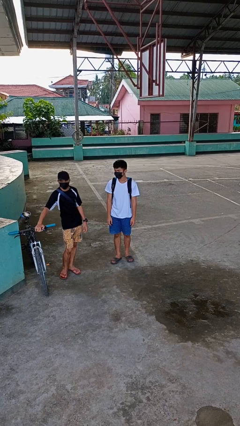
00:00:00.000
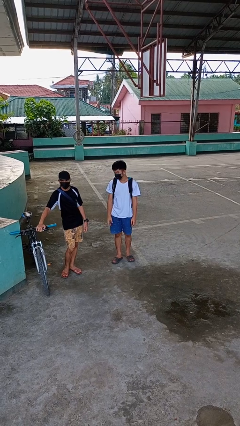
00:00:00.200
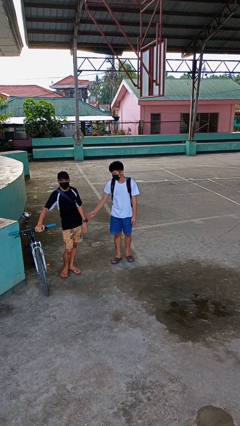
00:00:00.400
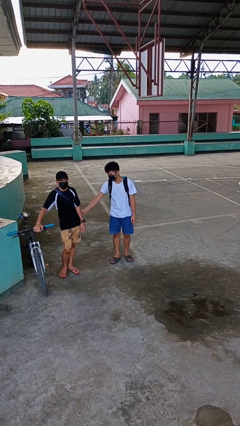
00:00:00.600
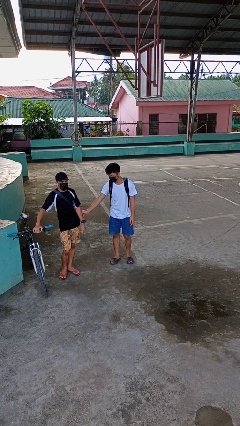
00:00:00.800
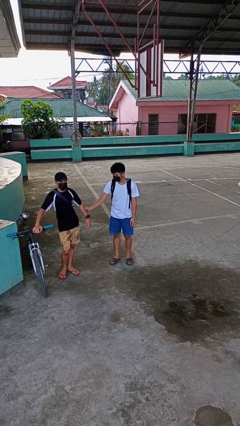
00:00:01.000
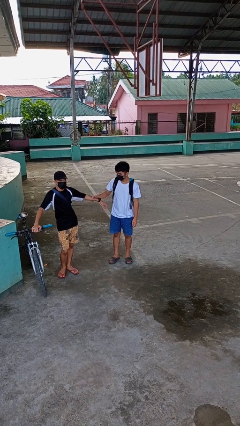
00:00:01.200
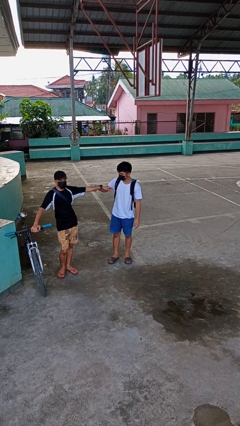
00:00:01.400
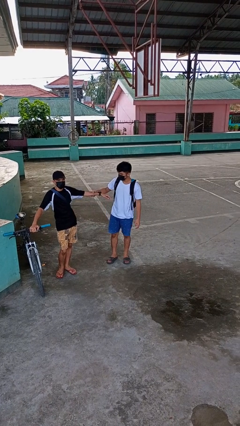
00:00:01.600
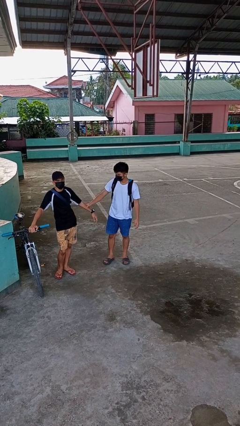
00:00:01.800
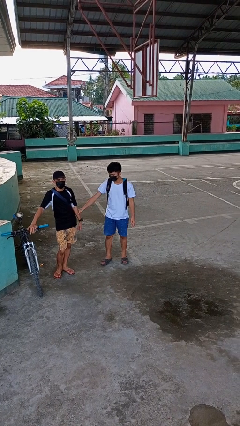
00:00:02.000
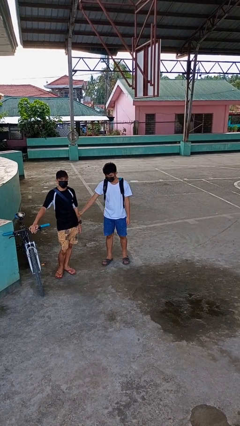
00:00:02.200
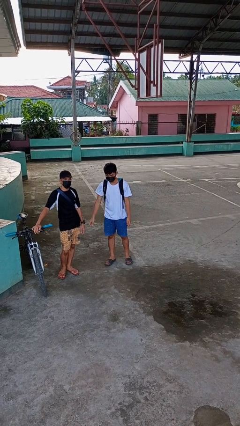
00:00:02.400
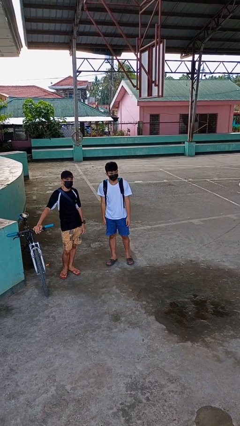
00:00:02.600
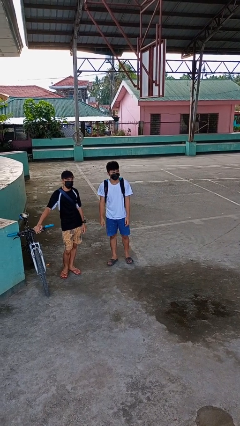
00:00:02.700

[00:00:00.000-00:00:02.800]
person grabs person by forearm

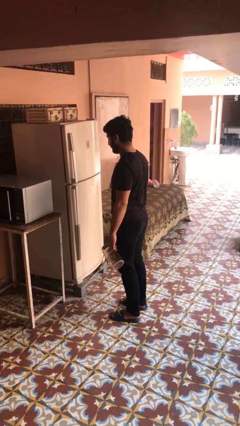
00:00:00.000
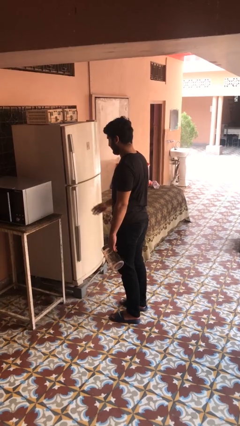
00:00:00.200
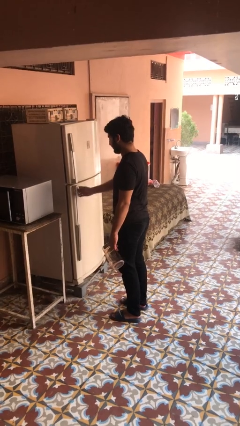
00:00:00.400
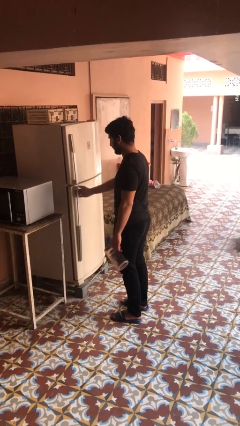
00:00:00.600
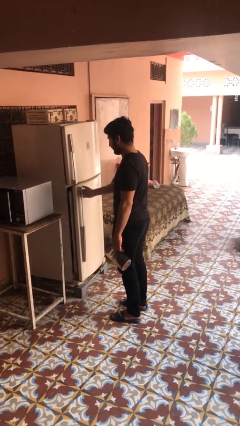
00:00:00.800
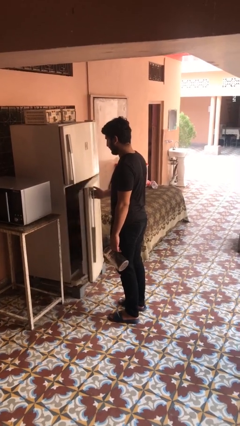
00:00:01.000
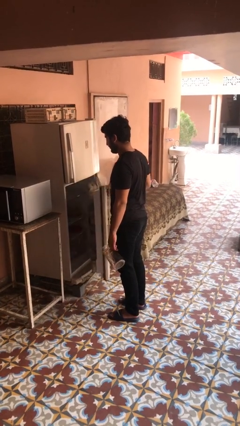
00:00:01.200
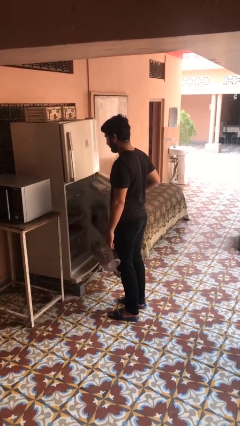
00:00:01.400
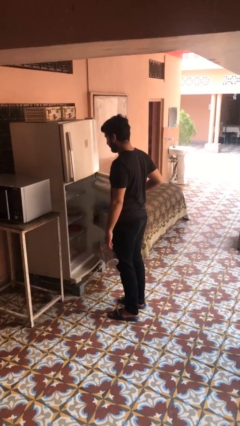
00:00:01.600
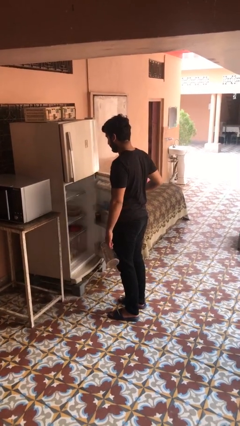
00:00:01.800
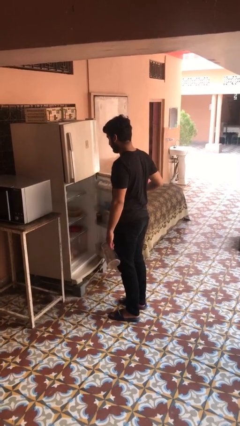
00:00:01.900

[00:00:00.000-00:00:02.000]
person opens refrigerator

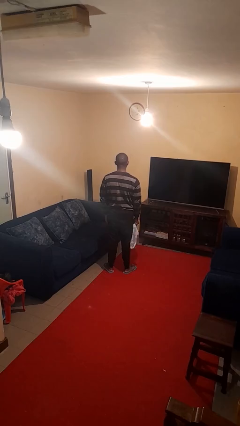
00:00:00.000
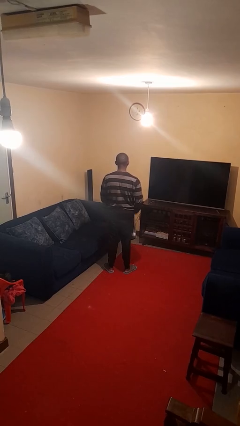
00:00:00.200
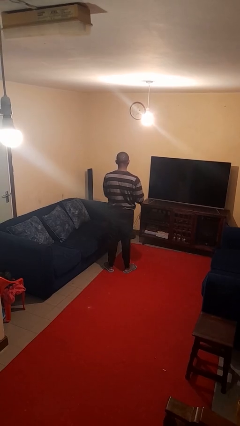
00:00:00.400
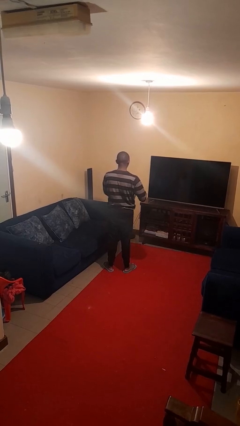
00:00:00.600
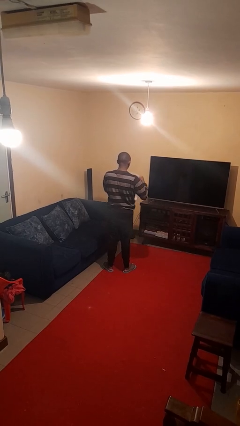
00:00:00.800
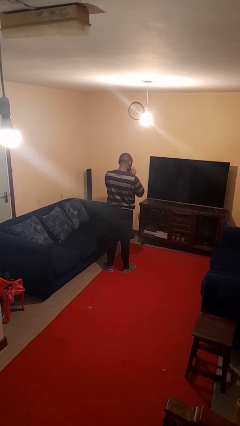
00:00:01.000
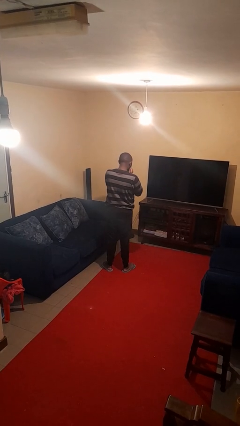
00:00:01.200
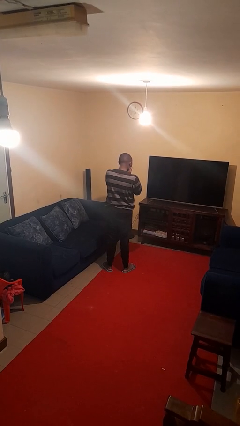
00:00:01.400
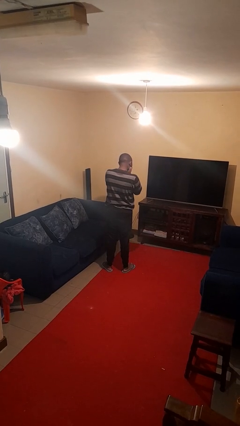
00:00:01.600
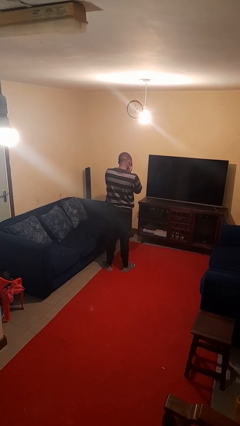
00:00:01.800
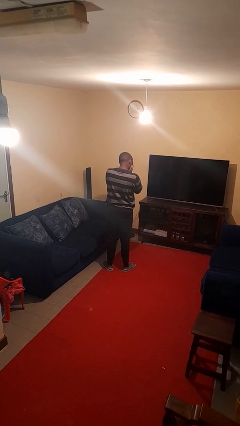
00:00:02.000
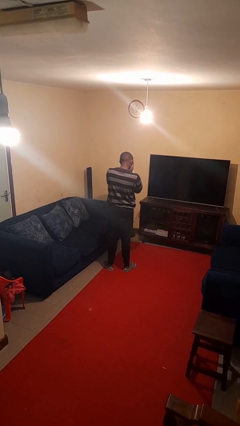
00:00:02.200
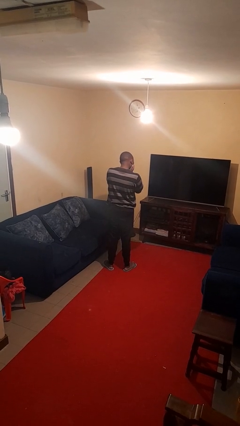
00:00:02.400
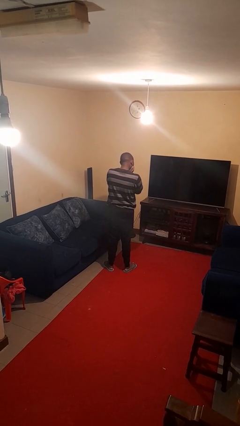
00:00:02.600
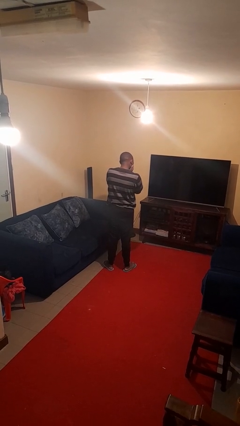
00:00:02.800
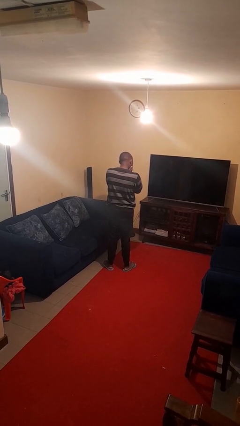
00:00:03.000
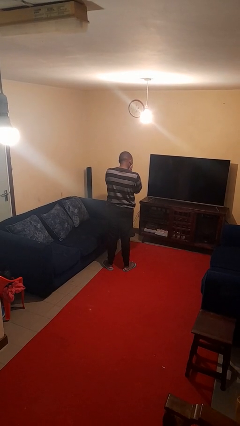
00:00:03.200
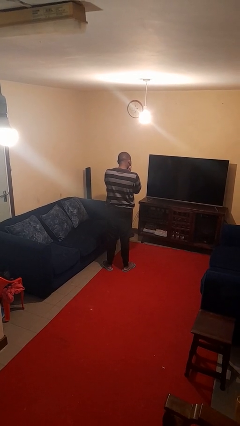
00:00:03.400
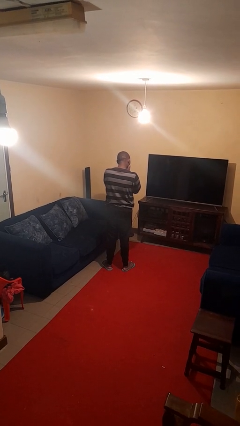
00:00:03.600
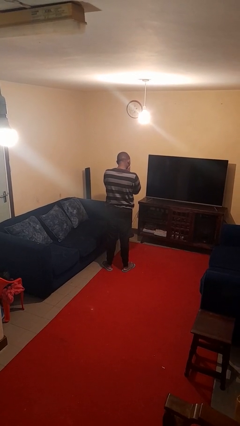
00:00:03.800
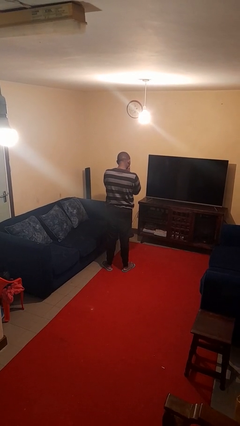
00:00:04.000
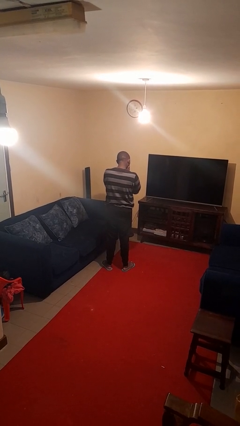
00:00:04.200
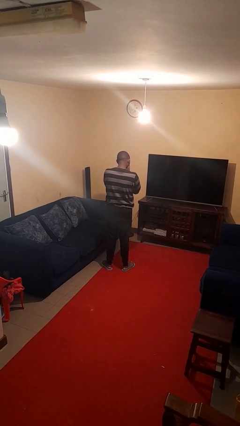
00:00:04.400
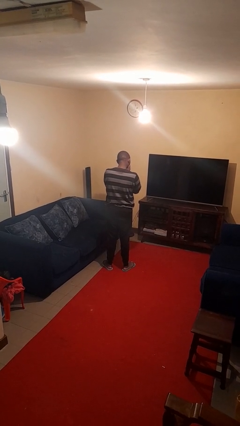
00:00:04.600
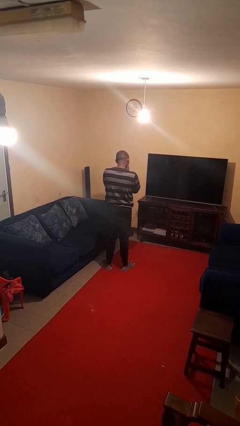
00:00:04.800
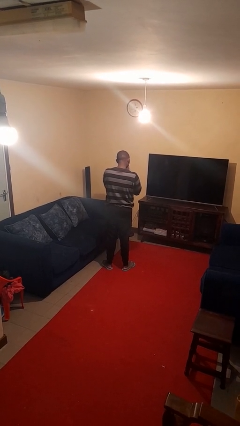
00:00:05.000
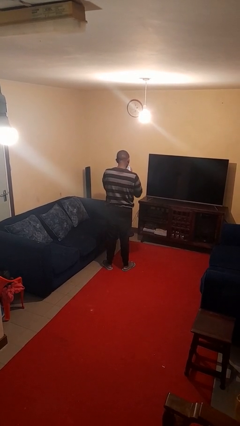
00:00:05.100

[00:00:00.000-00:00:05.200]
person blows nose

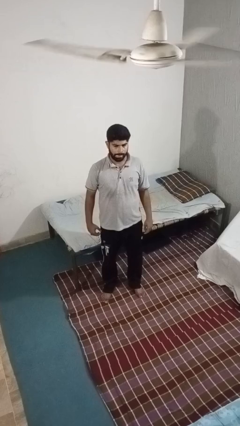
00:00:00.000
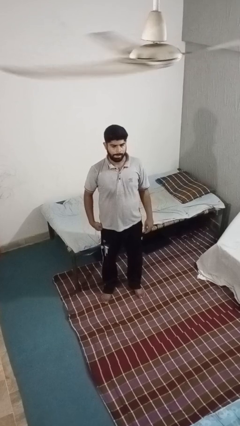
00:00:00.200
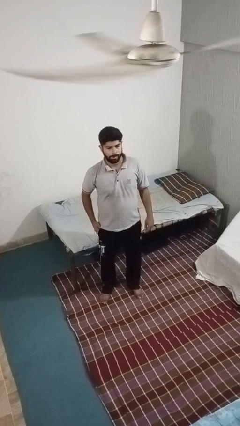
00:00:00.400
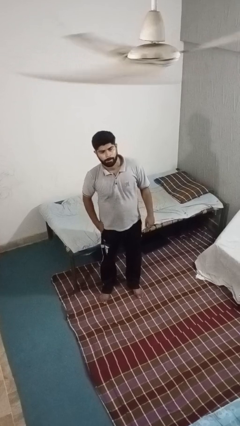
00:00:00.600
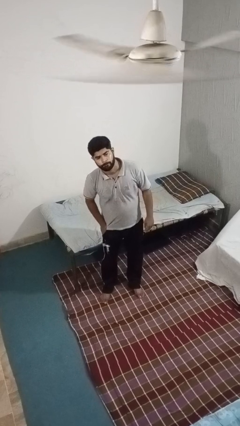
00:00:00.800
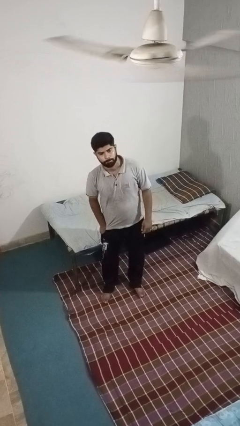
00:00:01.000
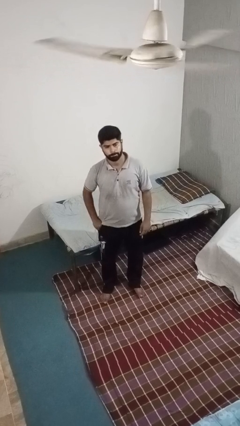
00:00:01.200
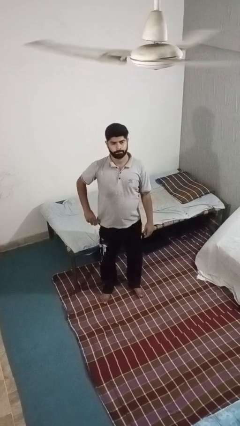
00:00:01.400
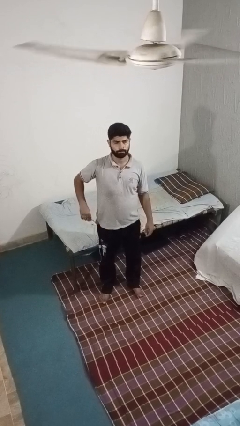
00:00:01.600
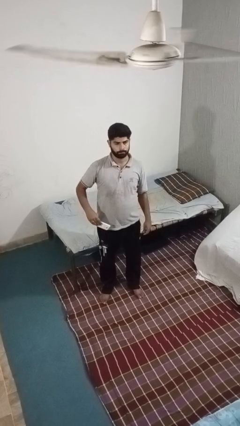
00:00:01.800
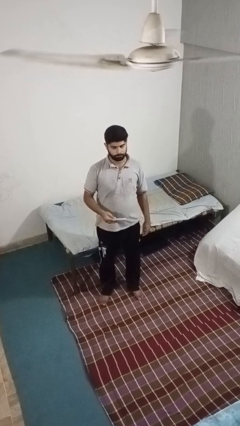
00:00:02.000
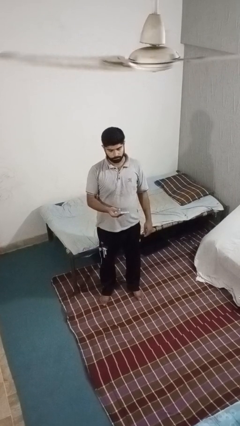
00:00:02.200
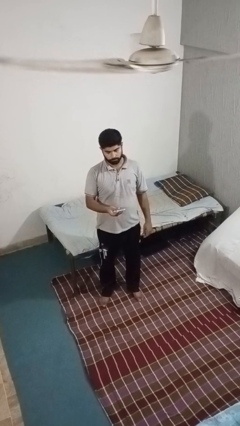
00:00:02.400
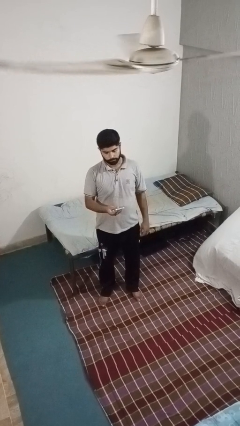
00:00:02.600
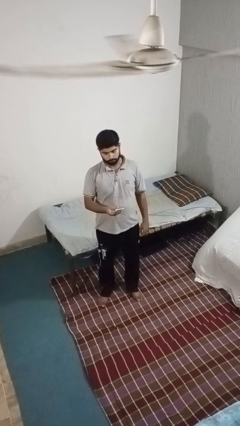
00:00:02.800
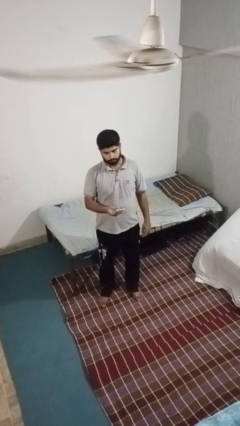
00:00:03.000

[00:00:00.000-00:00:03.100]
person takes phone from pocket

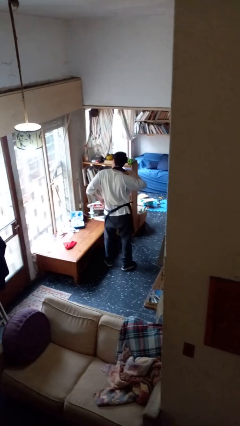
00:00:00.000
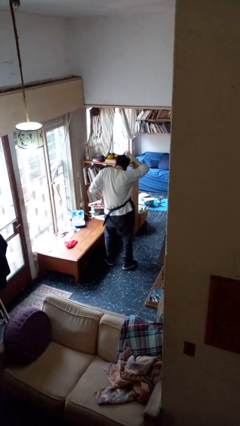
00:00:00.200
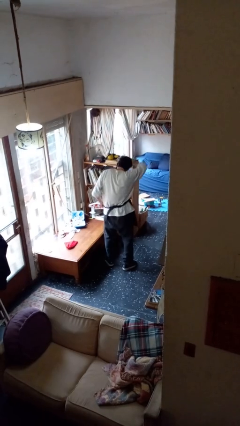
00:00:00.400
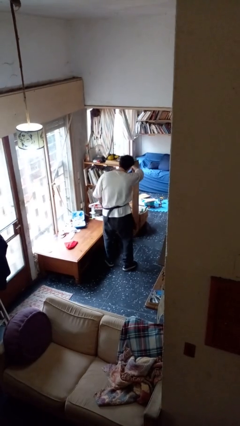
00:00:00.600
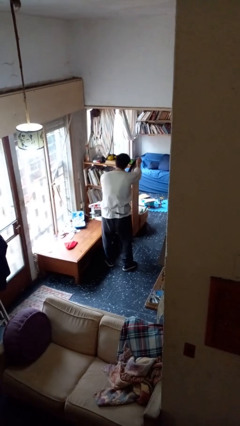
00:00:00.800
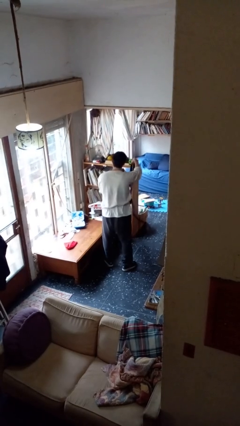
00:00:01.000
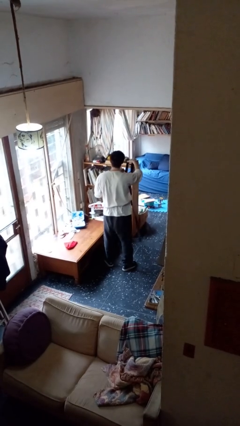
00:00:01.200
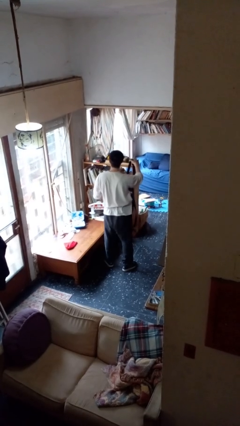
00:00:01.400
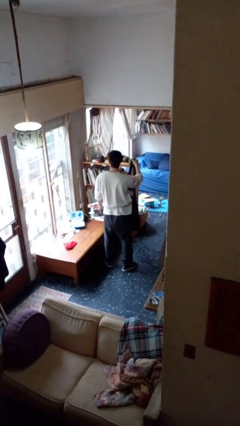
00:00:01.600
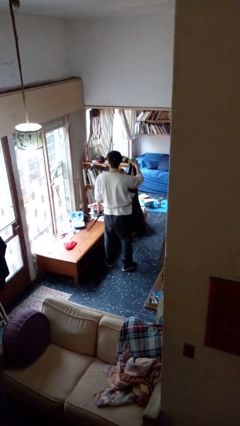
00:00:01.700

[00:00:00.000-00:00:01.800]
person takes off apron

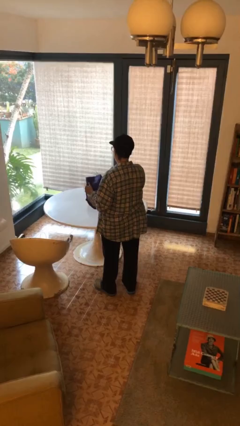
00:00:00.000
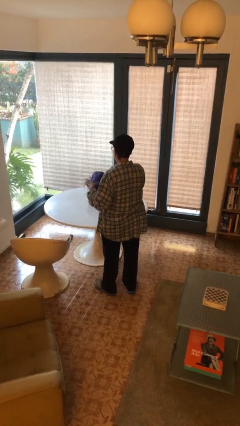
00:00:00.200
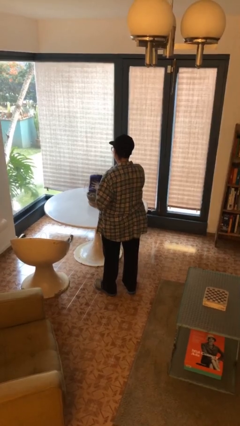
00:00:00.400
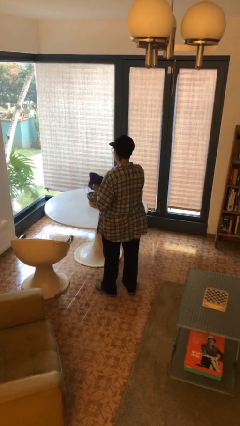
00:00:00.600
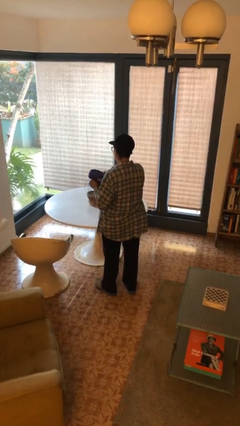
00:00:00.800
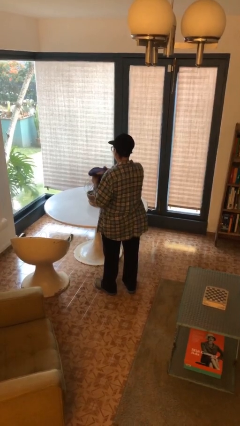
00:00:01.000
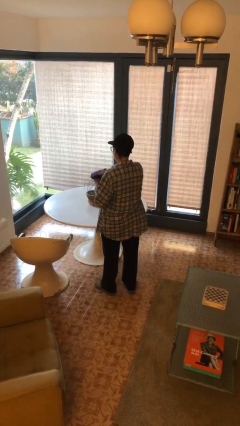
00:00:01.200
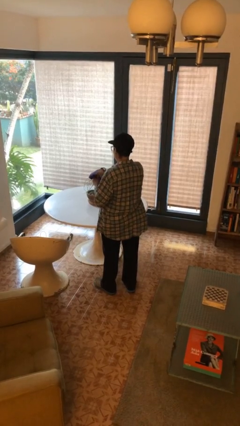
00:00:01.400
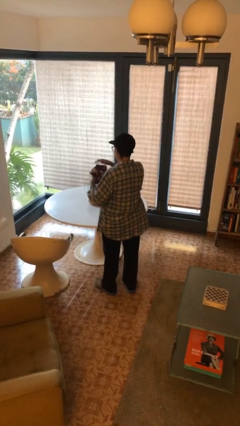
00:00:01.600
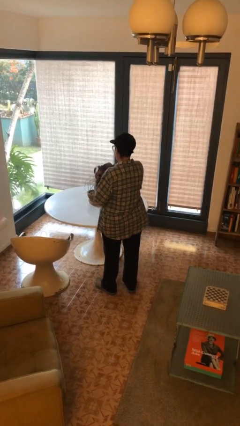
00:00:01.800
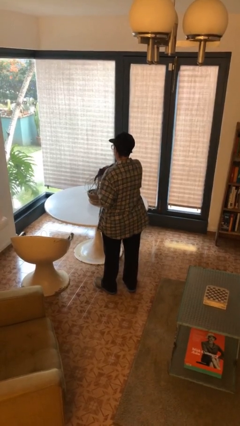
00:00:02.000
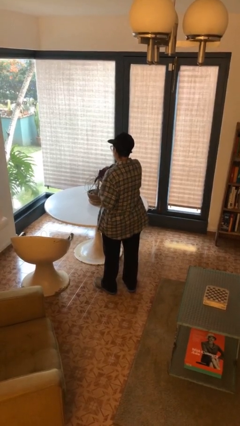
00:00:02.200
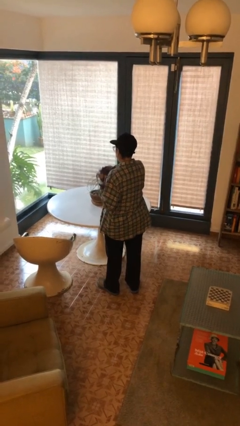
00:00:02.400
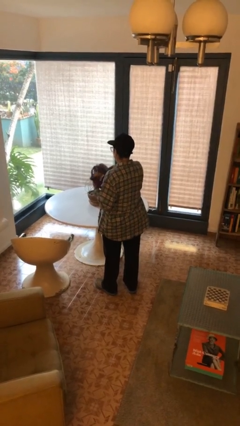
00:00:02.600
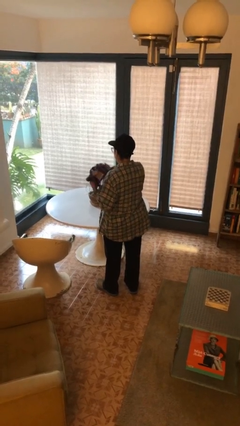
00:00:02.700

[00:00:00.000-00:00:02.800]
person squeezes object
